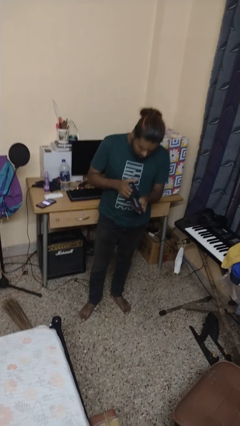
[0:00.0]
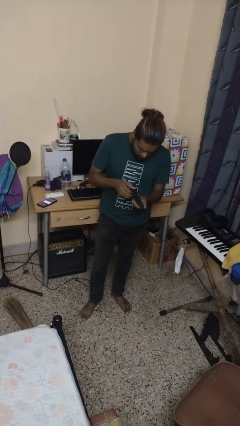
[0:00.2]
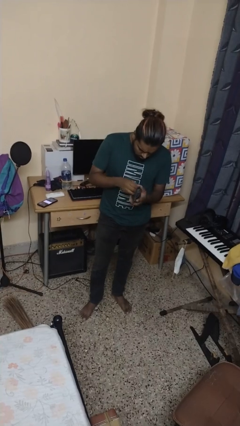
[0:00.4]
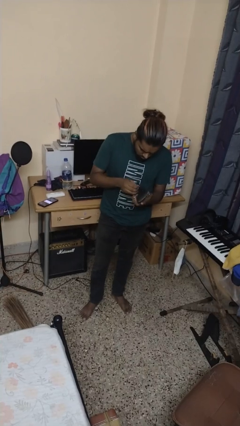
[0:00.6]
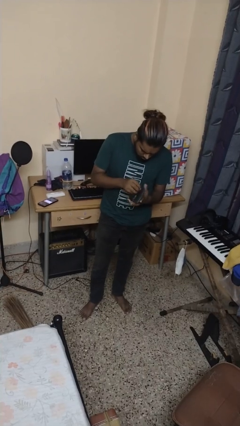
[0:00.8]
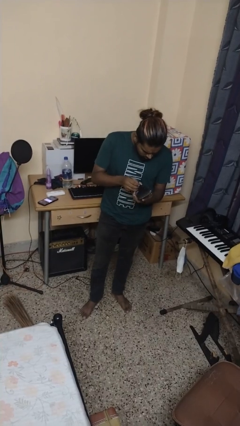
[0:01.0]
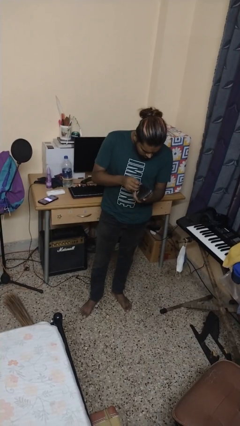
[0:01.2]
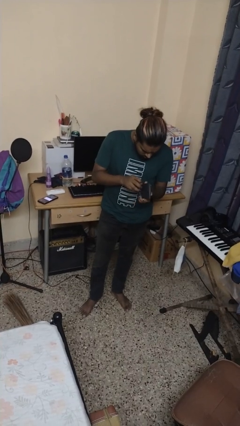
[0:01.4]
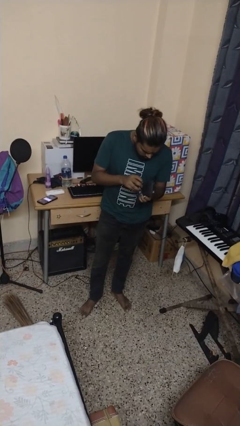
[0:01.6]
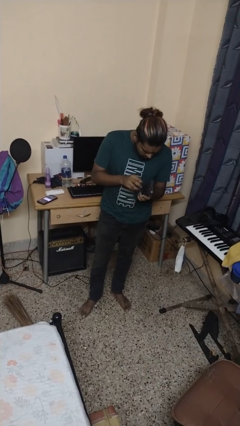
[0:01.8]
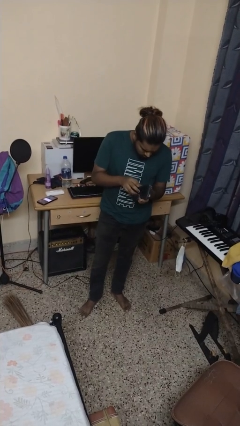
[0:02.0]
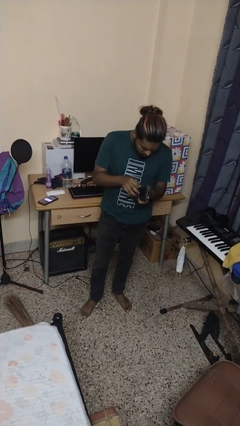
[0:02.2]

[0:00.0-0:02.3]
person searches in purse

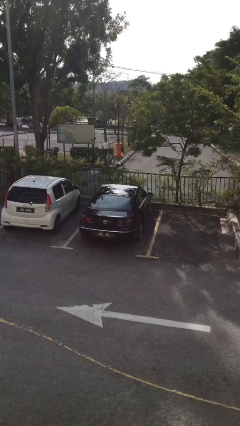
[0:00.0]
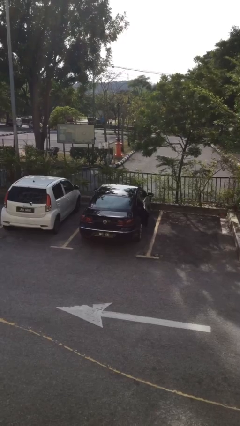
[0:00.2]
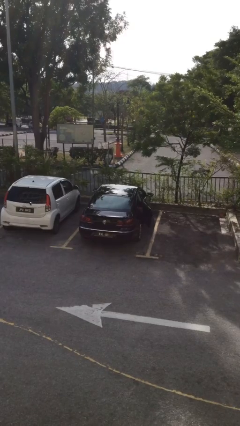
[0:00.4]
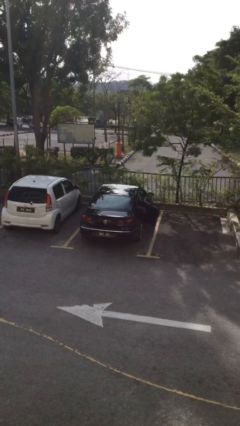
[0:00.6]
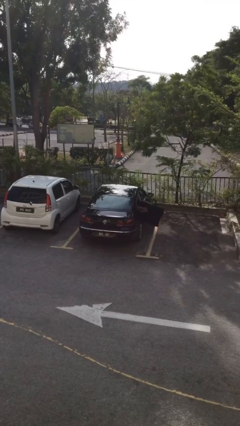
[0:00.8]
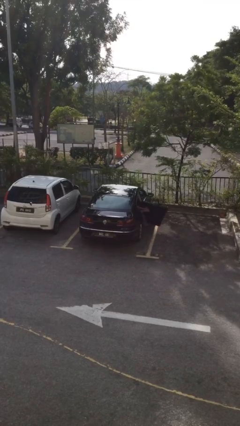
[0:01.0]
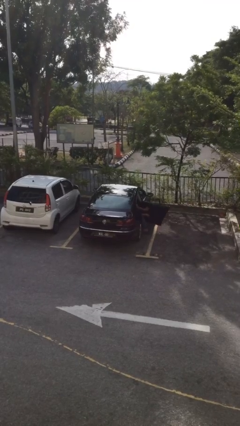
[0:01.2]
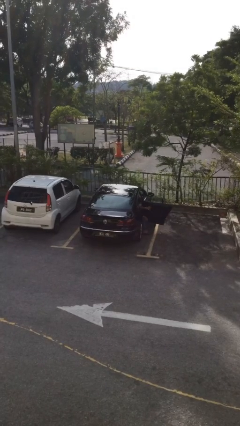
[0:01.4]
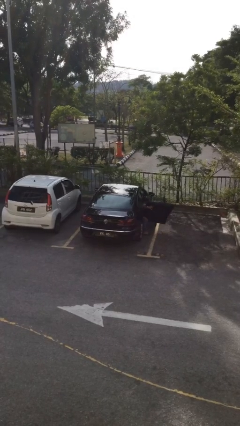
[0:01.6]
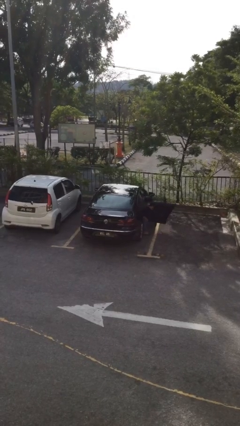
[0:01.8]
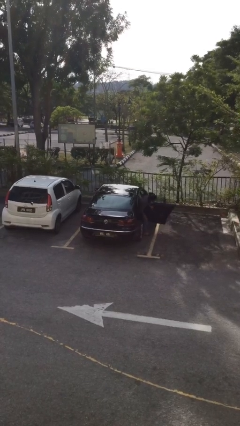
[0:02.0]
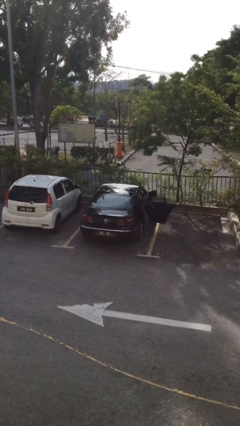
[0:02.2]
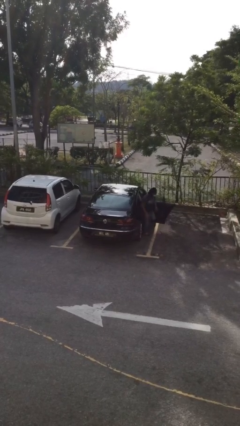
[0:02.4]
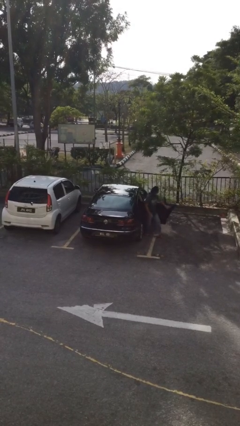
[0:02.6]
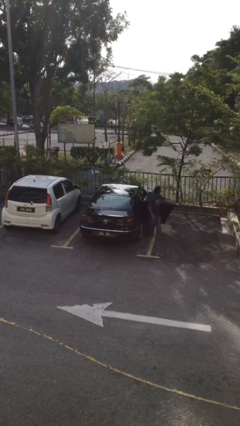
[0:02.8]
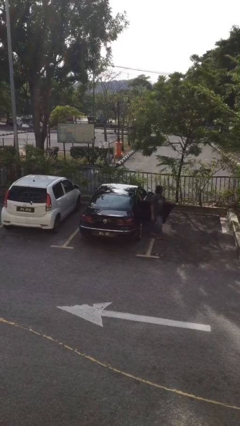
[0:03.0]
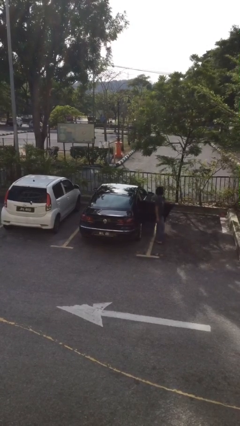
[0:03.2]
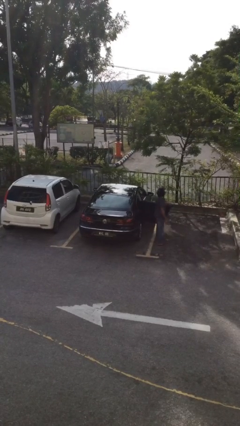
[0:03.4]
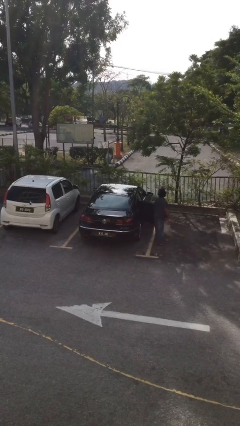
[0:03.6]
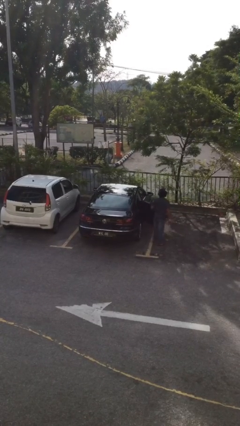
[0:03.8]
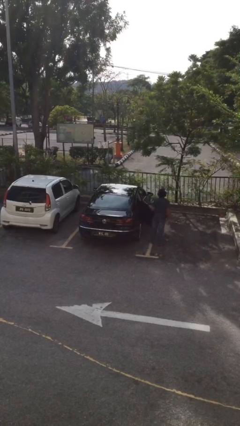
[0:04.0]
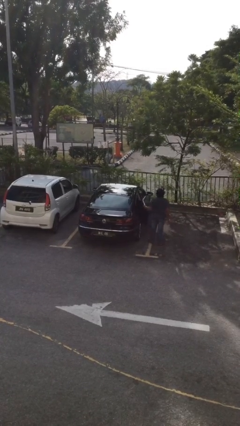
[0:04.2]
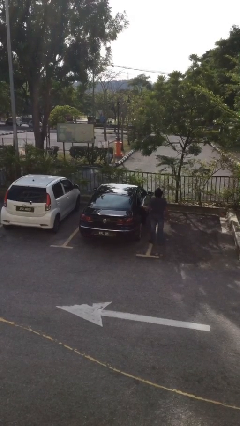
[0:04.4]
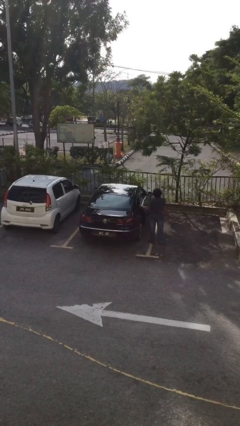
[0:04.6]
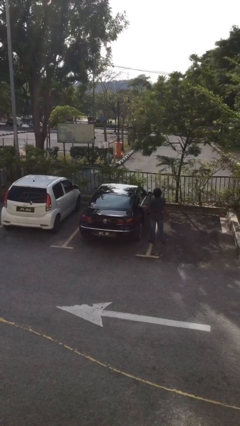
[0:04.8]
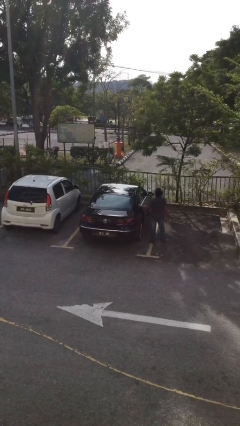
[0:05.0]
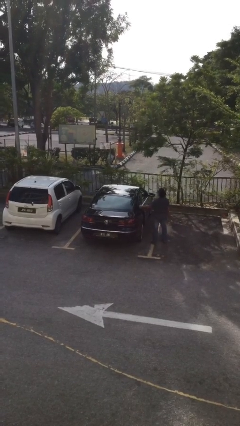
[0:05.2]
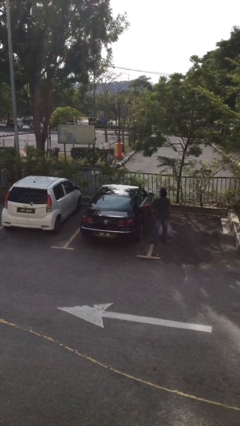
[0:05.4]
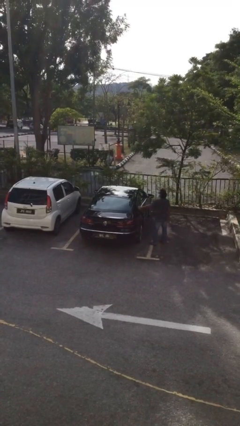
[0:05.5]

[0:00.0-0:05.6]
car drops off person

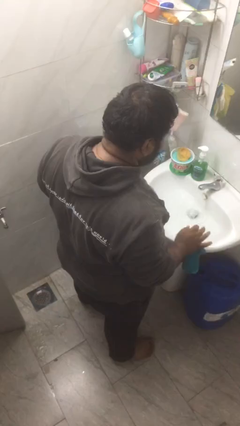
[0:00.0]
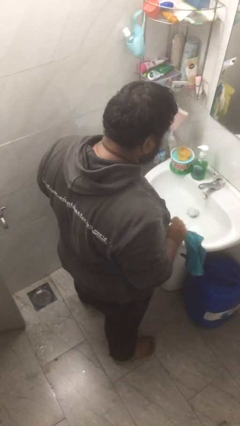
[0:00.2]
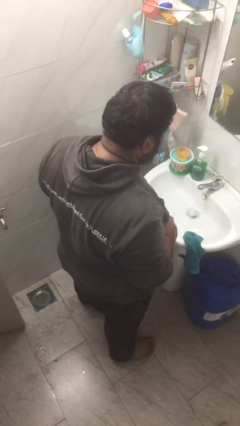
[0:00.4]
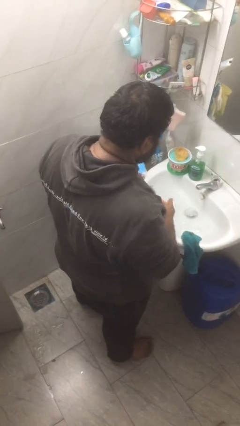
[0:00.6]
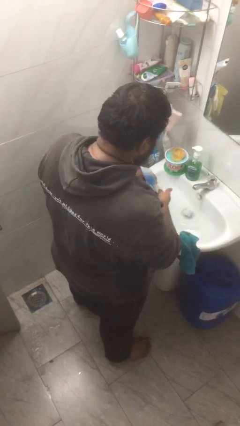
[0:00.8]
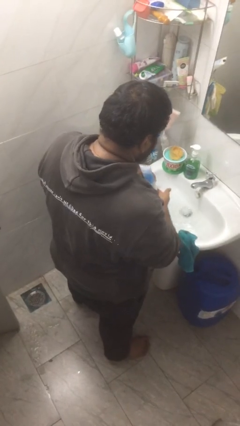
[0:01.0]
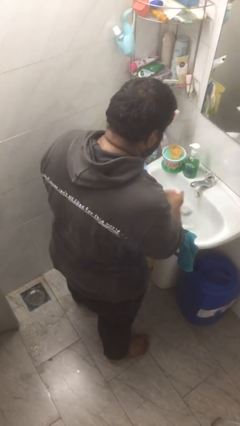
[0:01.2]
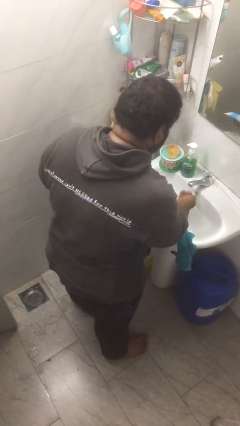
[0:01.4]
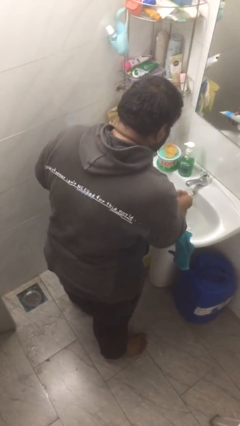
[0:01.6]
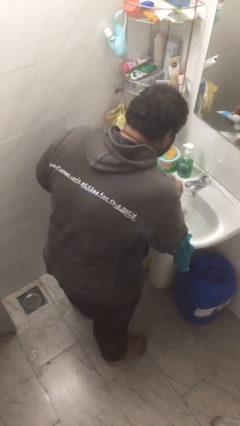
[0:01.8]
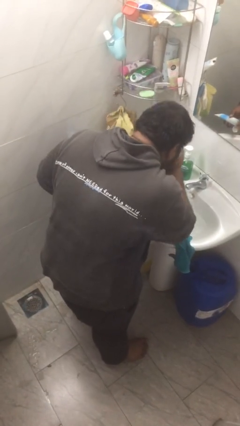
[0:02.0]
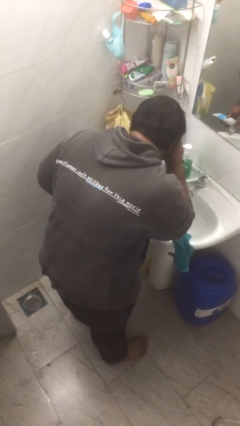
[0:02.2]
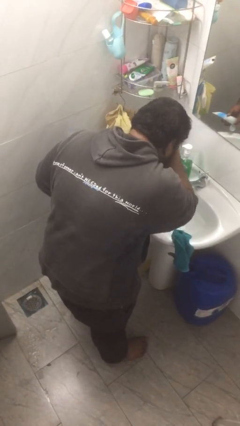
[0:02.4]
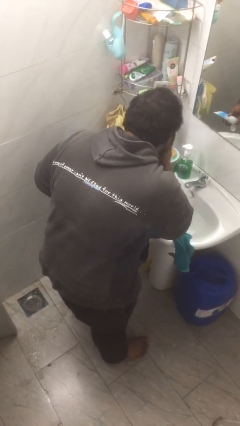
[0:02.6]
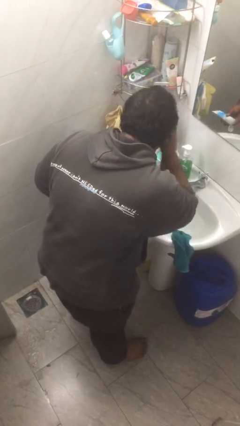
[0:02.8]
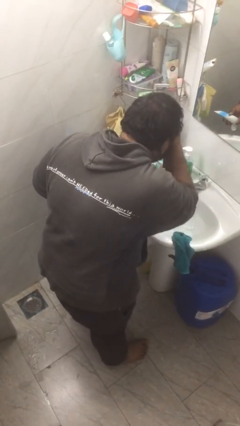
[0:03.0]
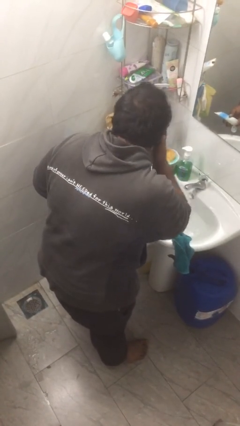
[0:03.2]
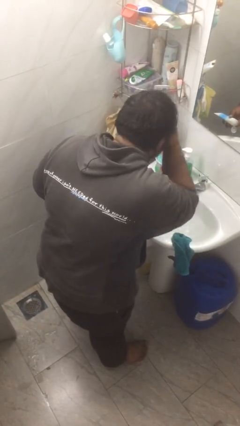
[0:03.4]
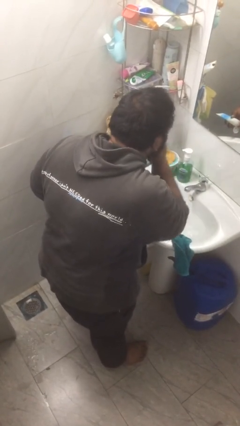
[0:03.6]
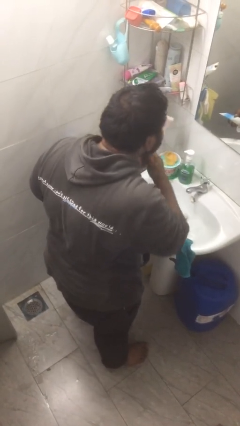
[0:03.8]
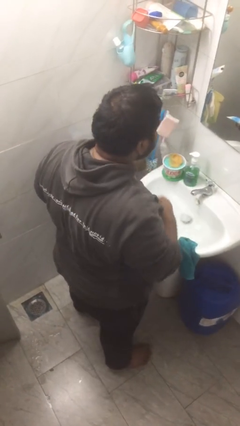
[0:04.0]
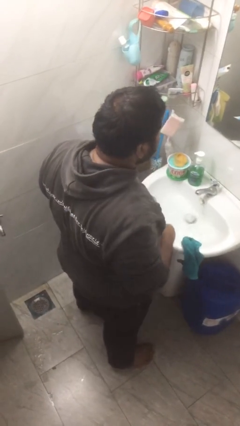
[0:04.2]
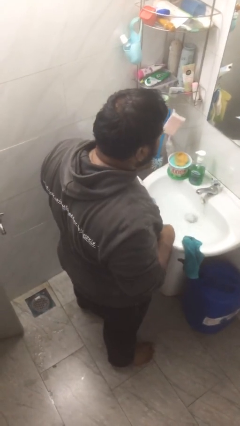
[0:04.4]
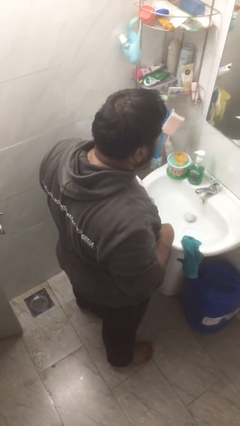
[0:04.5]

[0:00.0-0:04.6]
person washes face

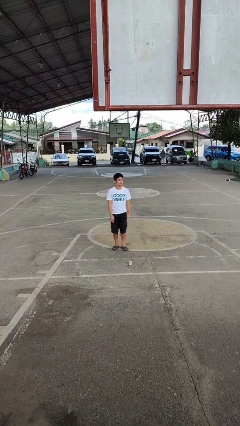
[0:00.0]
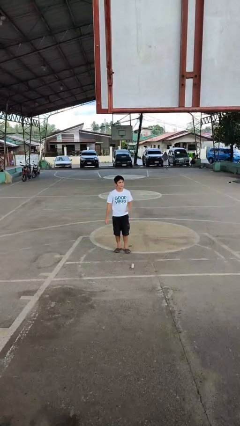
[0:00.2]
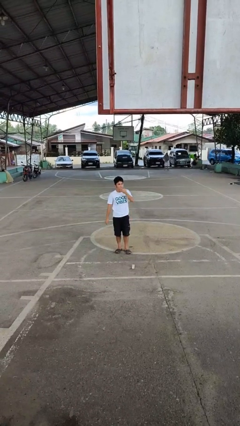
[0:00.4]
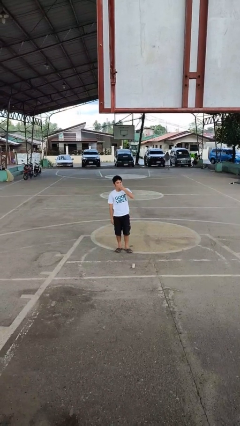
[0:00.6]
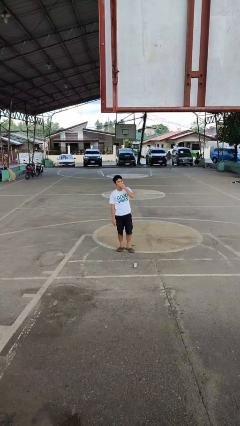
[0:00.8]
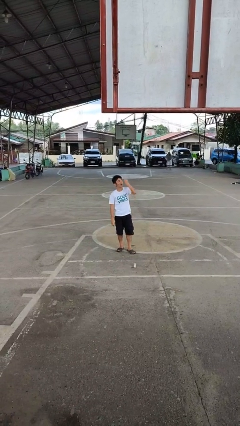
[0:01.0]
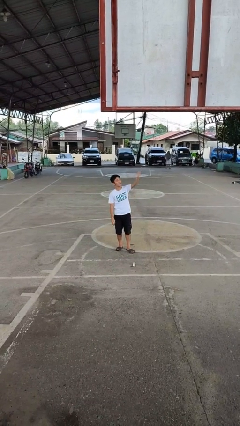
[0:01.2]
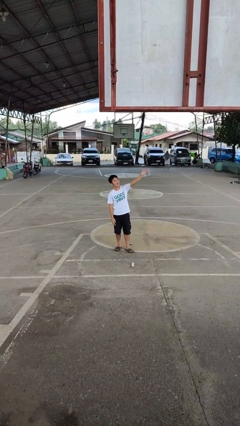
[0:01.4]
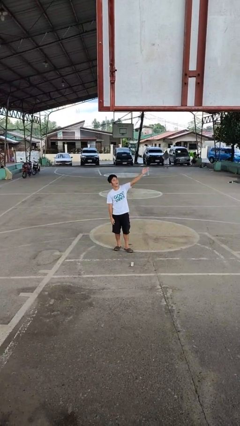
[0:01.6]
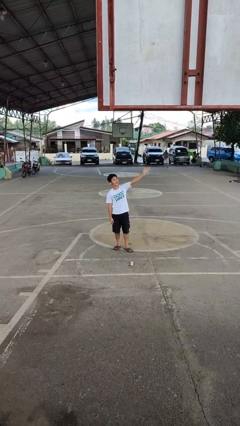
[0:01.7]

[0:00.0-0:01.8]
person gestures blow kiss

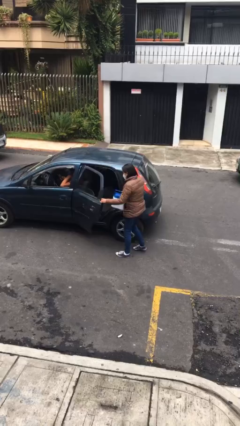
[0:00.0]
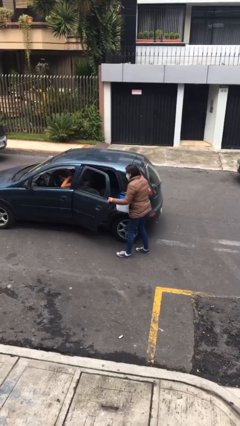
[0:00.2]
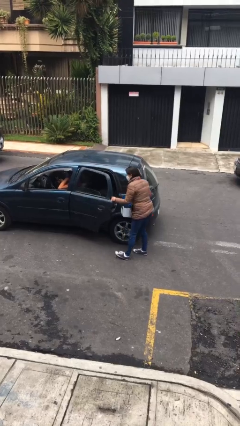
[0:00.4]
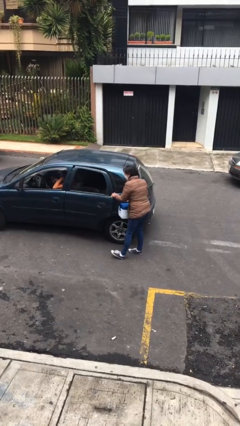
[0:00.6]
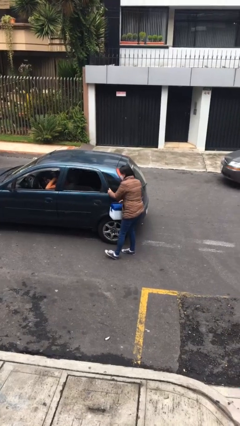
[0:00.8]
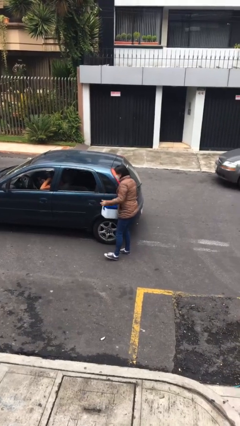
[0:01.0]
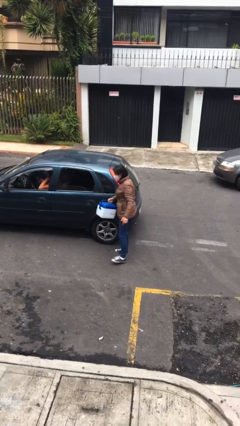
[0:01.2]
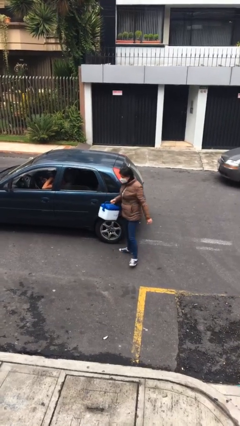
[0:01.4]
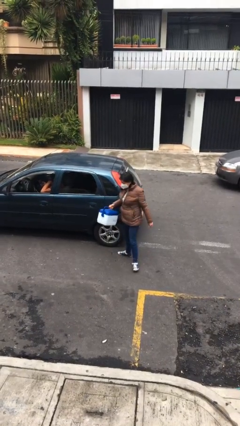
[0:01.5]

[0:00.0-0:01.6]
person closes car door

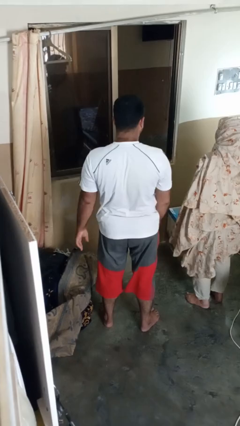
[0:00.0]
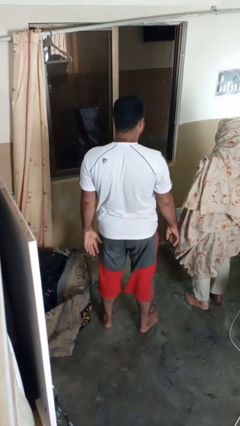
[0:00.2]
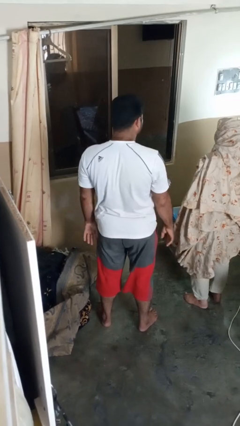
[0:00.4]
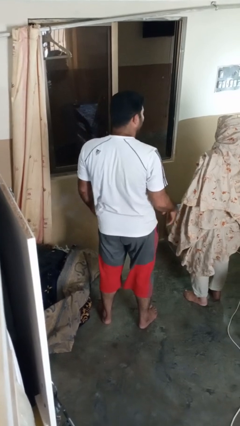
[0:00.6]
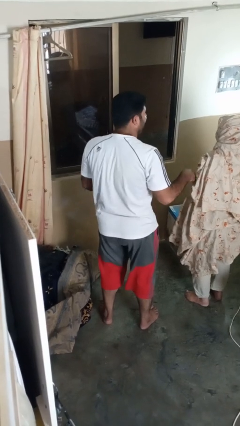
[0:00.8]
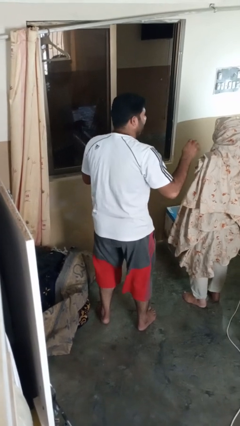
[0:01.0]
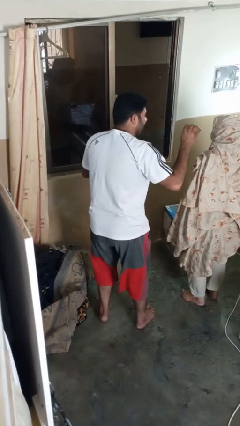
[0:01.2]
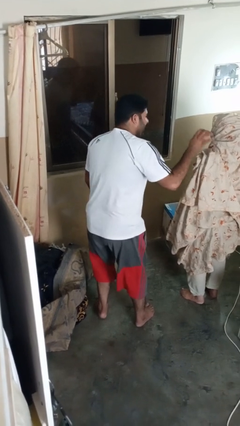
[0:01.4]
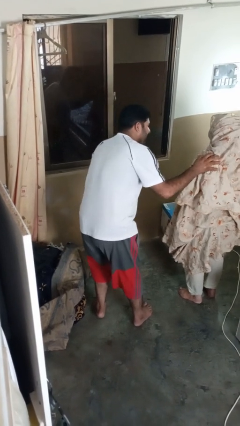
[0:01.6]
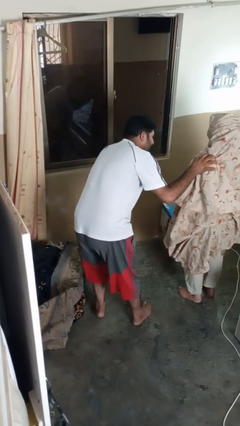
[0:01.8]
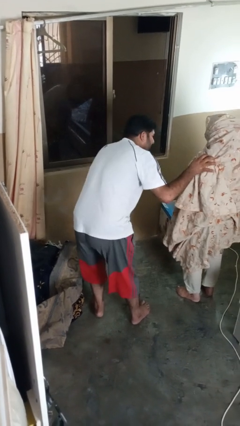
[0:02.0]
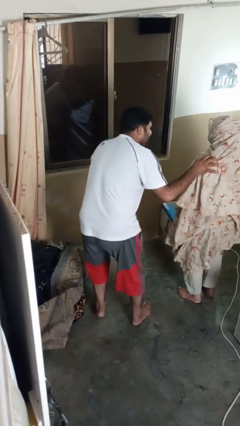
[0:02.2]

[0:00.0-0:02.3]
person laughs with person
